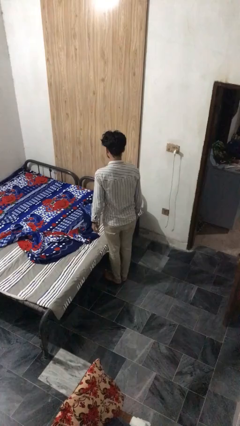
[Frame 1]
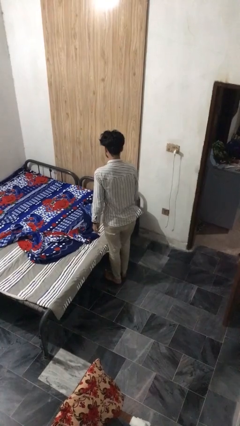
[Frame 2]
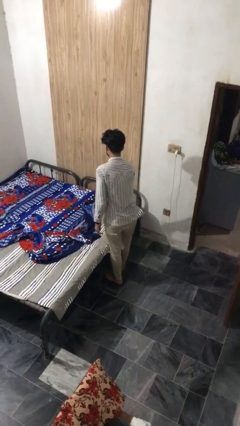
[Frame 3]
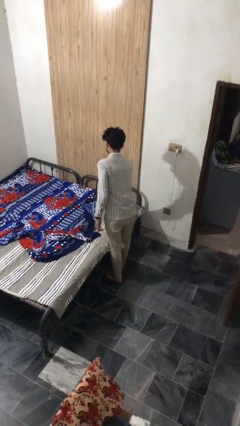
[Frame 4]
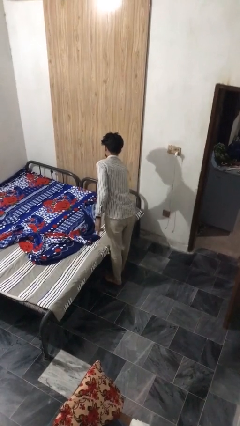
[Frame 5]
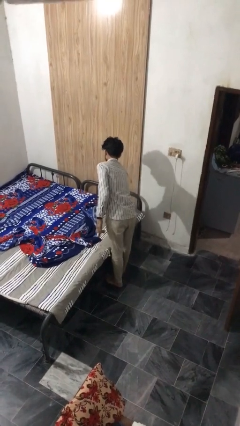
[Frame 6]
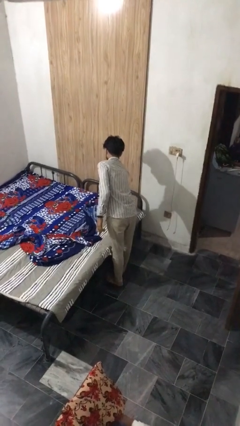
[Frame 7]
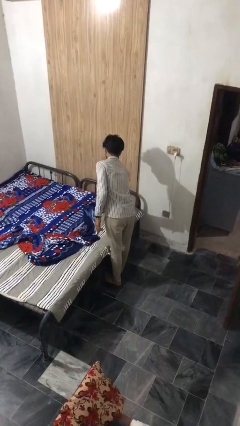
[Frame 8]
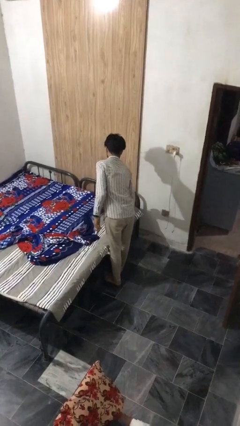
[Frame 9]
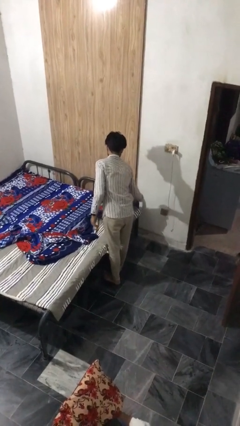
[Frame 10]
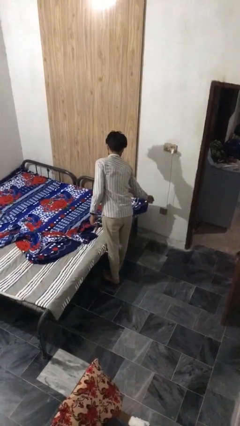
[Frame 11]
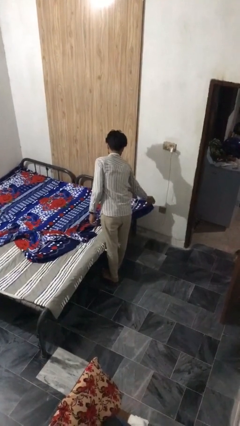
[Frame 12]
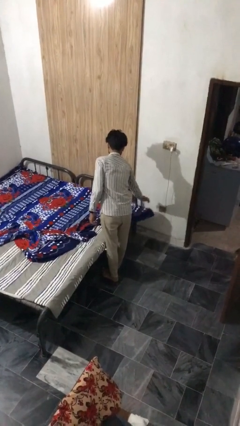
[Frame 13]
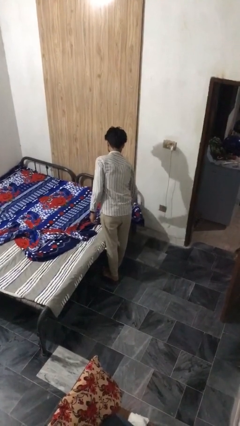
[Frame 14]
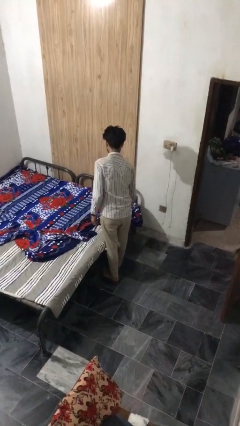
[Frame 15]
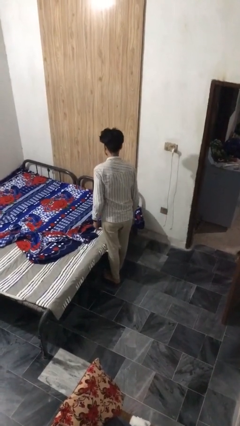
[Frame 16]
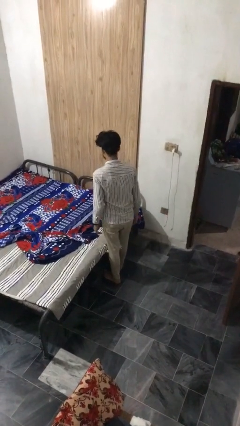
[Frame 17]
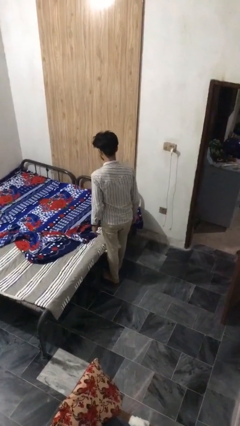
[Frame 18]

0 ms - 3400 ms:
person makes bed

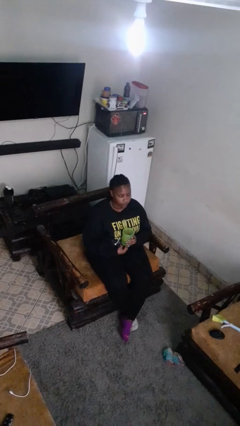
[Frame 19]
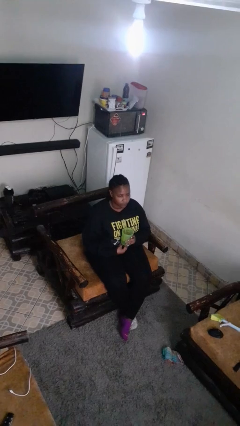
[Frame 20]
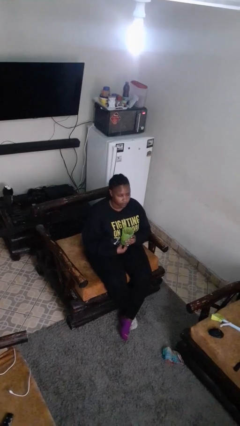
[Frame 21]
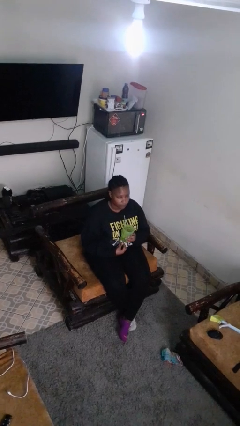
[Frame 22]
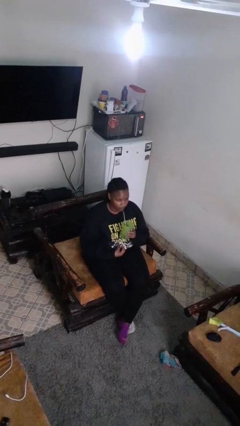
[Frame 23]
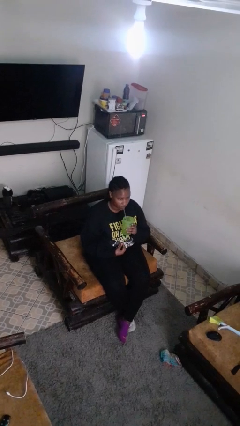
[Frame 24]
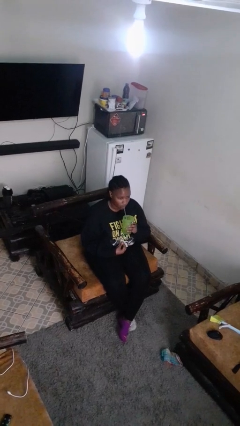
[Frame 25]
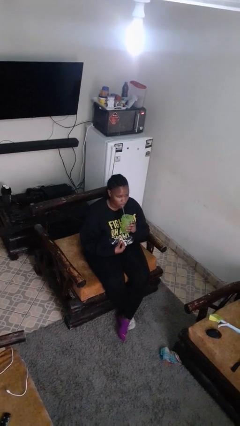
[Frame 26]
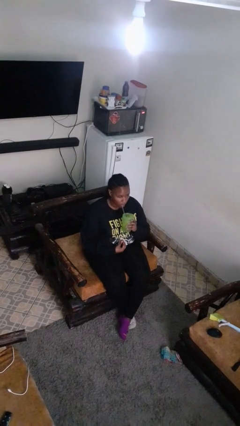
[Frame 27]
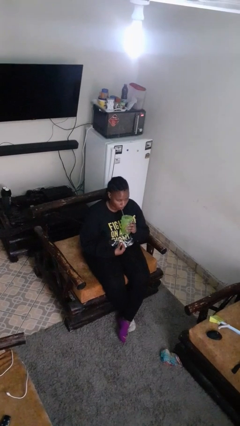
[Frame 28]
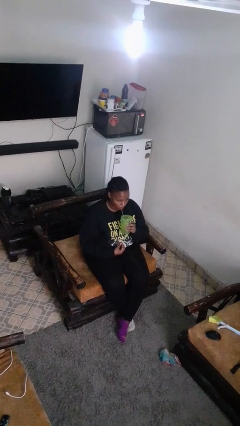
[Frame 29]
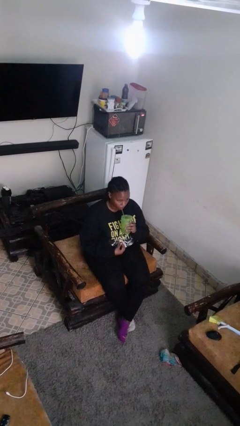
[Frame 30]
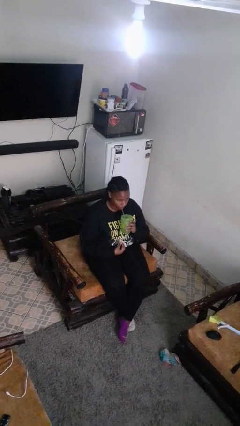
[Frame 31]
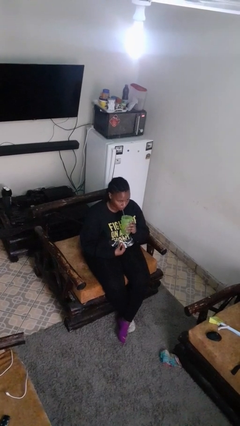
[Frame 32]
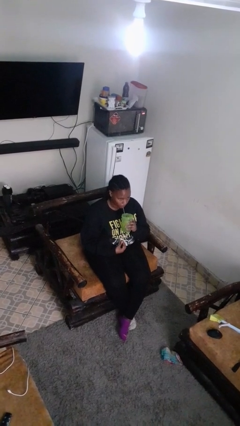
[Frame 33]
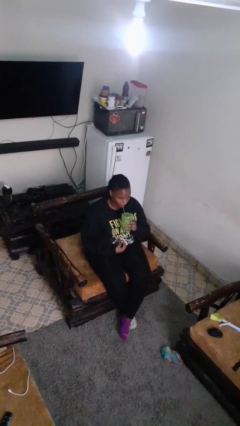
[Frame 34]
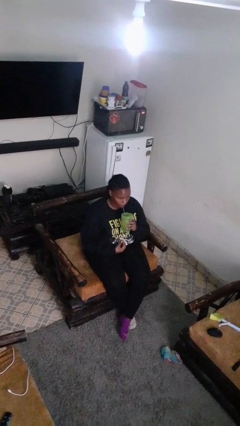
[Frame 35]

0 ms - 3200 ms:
person drinks from straw

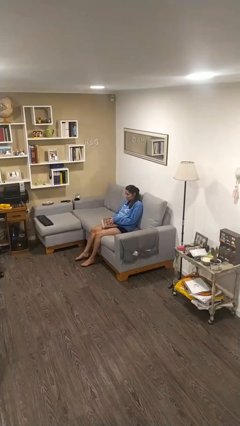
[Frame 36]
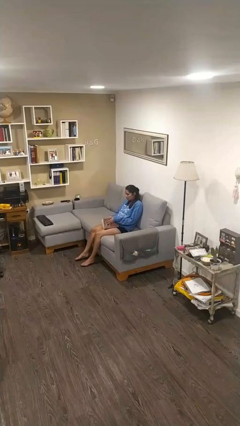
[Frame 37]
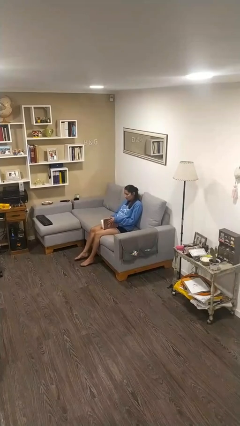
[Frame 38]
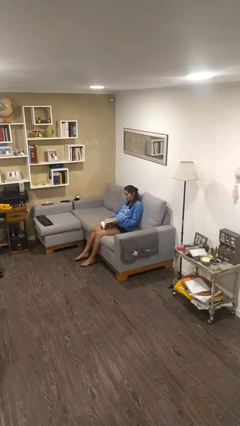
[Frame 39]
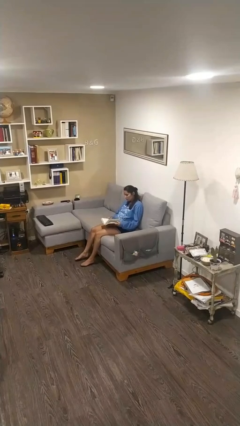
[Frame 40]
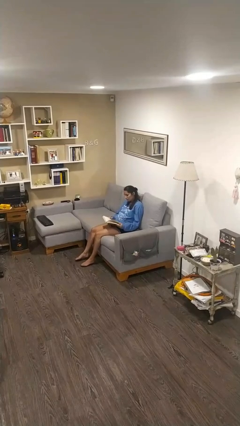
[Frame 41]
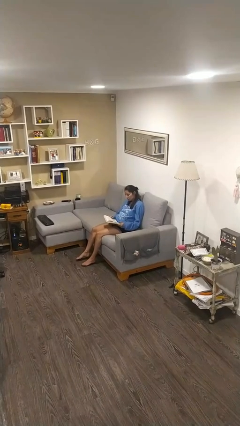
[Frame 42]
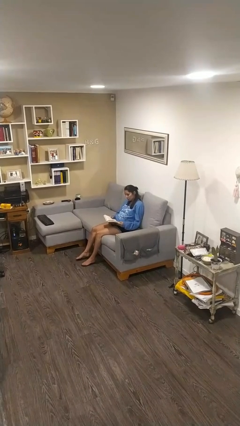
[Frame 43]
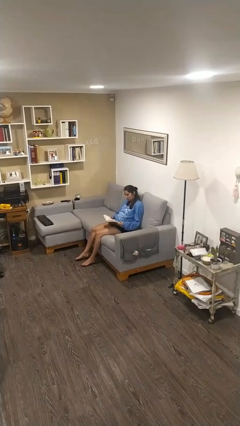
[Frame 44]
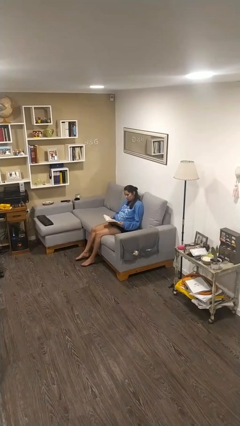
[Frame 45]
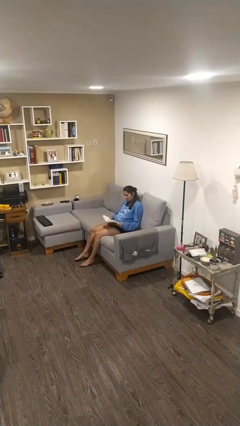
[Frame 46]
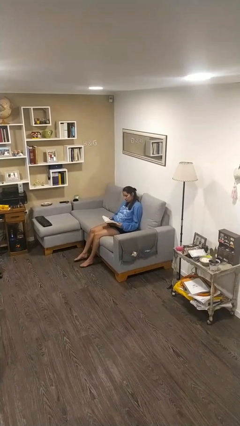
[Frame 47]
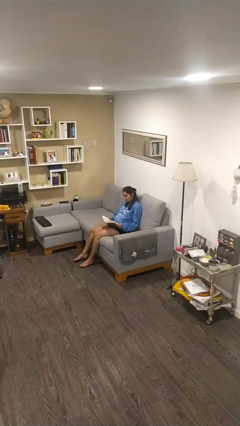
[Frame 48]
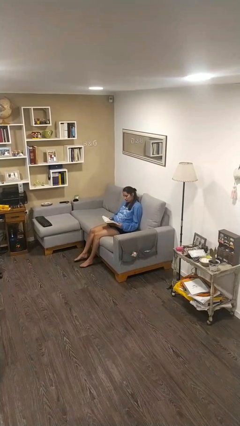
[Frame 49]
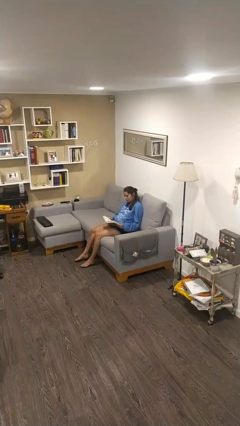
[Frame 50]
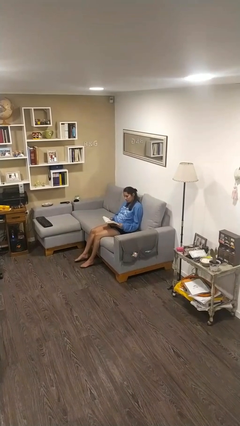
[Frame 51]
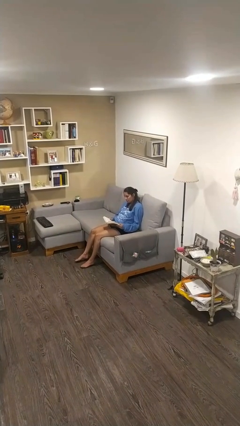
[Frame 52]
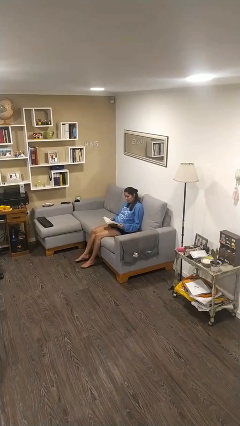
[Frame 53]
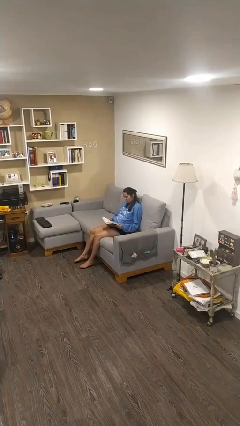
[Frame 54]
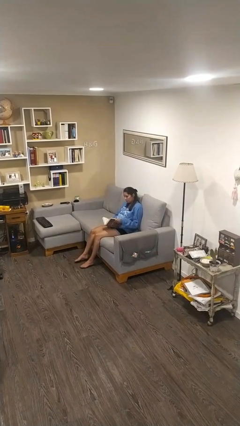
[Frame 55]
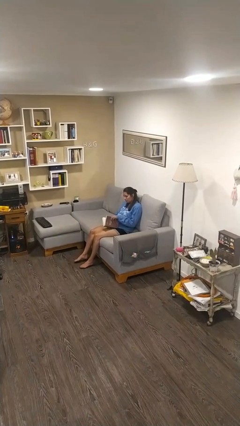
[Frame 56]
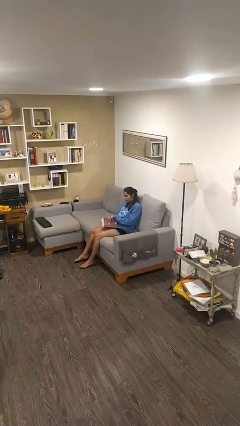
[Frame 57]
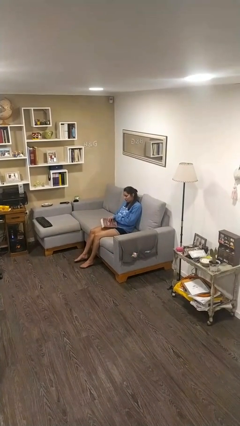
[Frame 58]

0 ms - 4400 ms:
person reads document

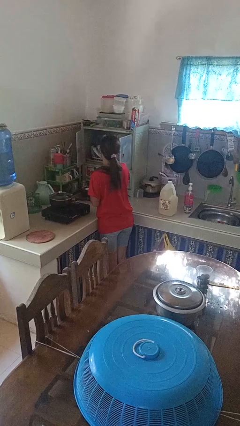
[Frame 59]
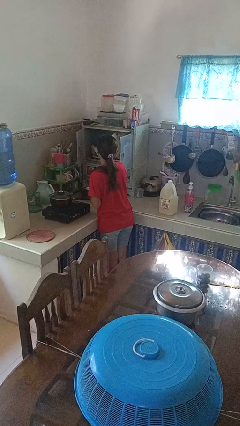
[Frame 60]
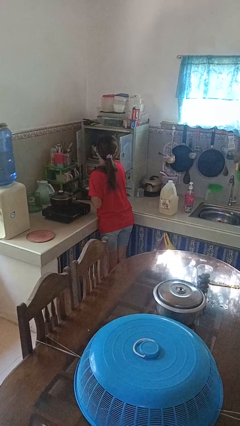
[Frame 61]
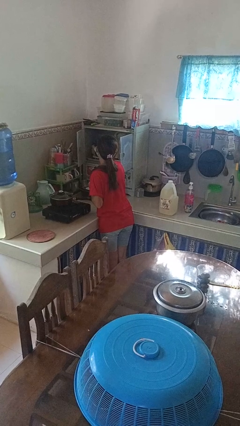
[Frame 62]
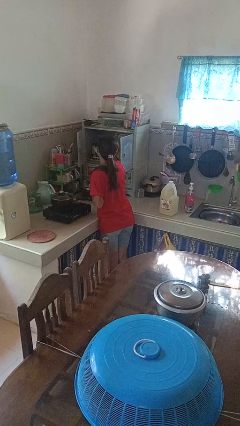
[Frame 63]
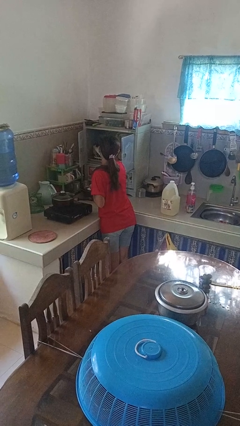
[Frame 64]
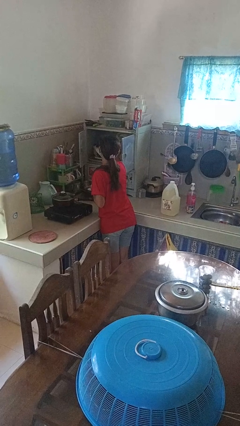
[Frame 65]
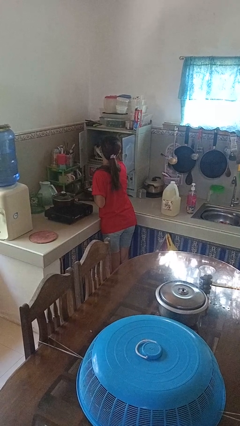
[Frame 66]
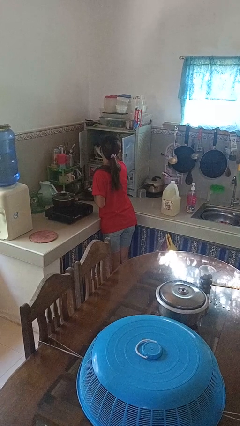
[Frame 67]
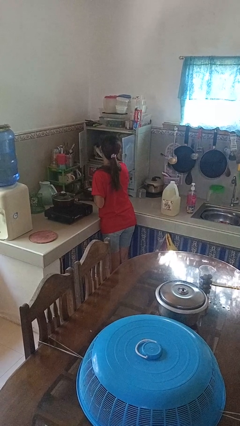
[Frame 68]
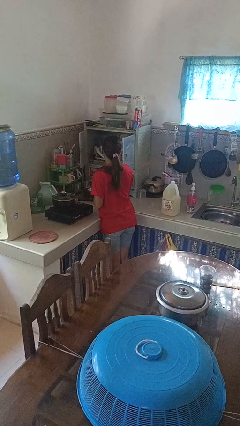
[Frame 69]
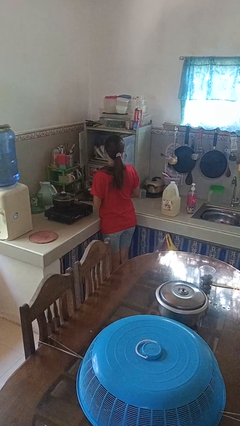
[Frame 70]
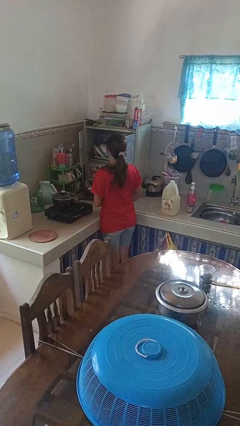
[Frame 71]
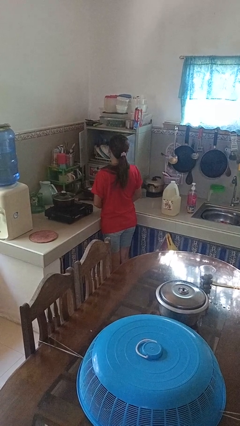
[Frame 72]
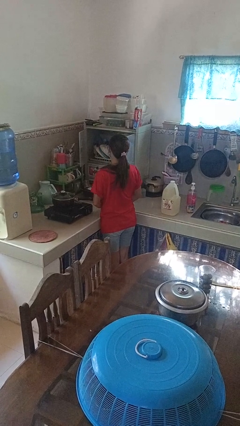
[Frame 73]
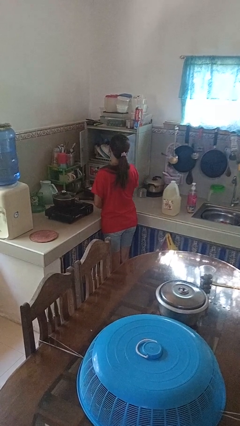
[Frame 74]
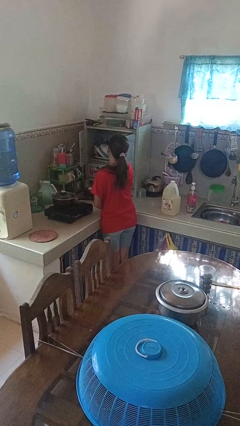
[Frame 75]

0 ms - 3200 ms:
person puts object in cabinet

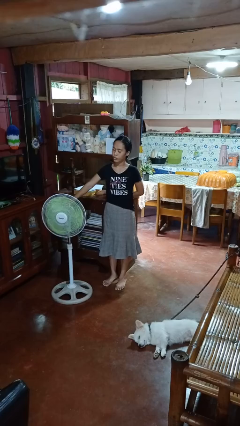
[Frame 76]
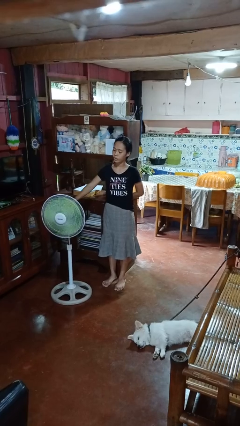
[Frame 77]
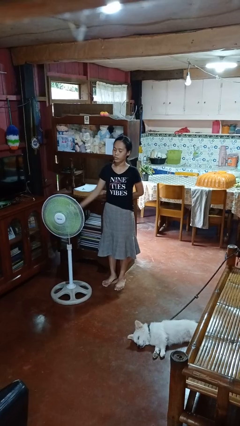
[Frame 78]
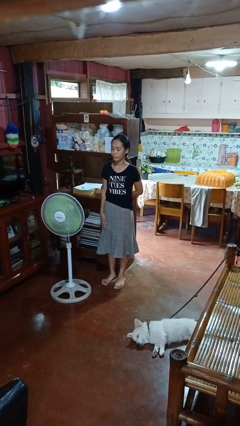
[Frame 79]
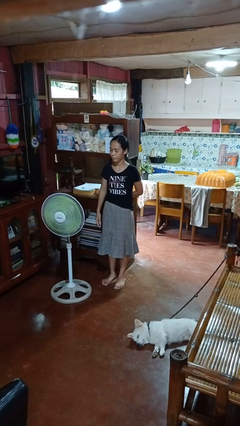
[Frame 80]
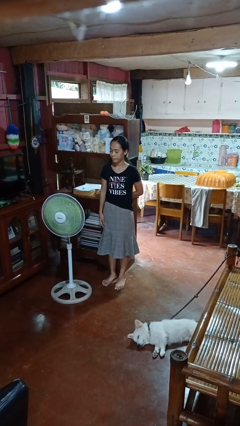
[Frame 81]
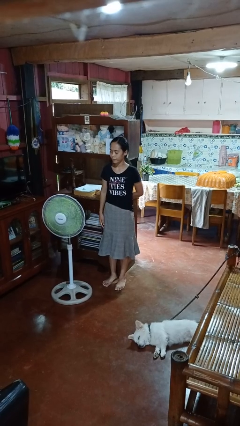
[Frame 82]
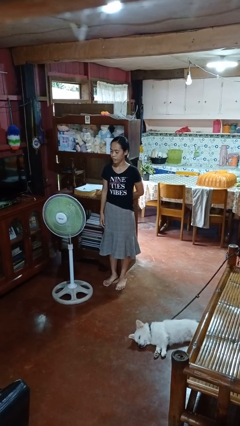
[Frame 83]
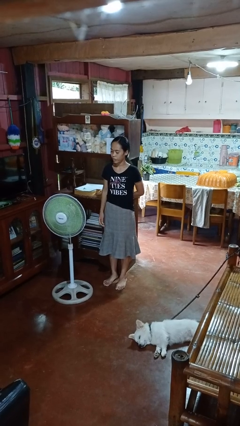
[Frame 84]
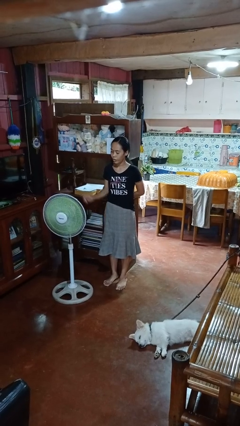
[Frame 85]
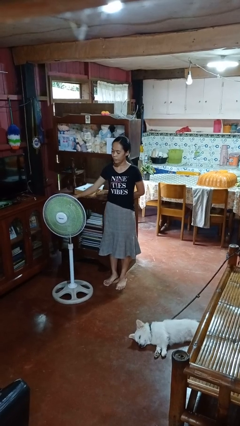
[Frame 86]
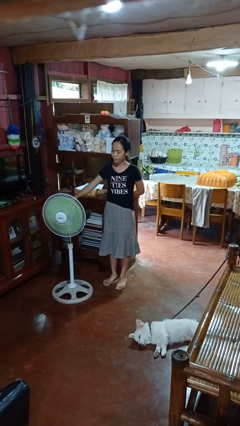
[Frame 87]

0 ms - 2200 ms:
person turns on fan

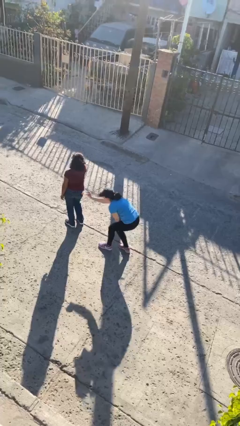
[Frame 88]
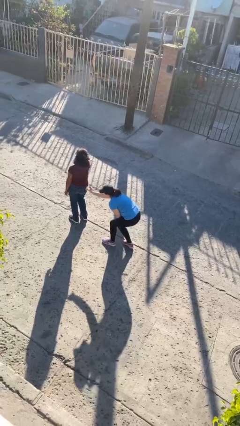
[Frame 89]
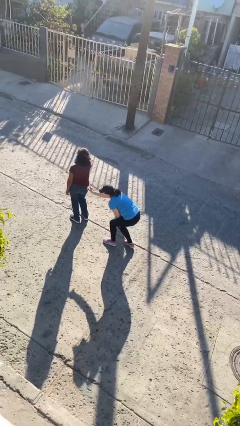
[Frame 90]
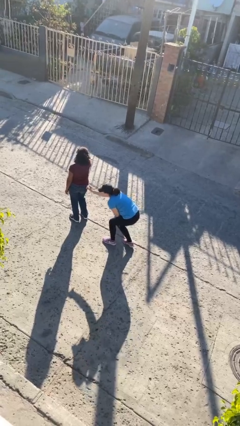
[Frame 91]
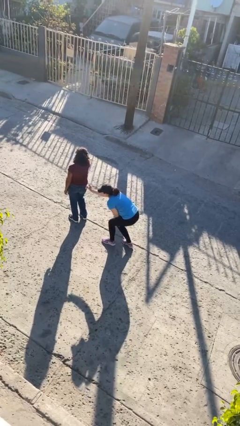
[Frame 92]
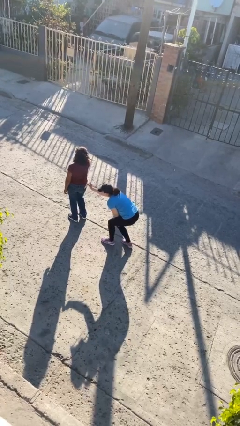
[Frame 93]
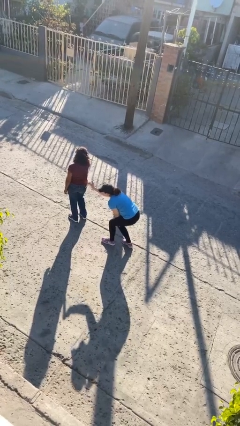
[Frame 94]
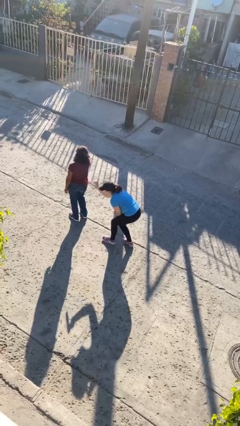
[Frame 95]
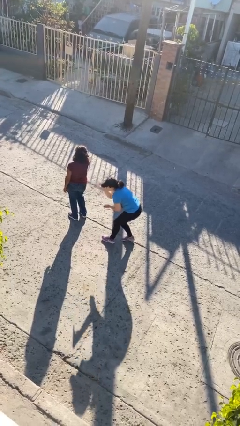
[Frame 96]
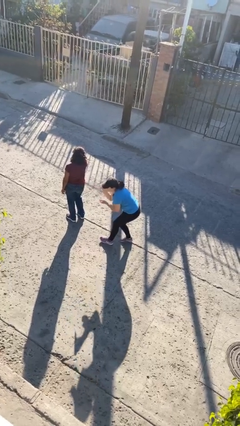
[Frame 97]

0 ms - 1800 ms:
person steals object from person
